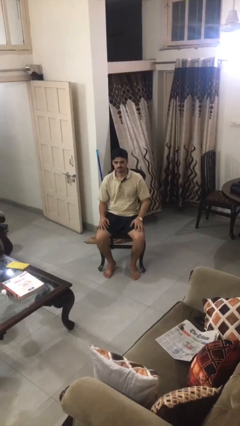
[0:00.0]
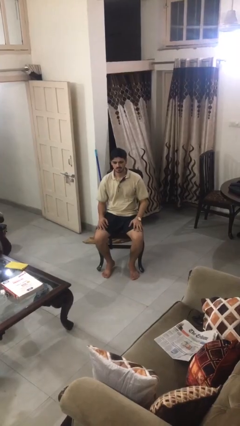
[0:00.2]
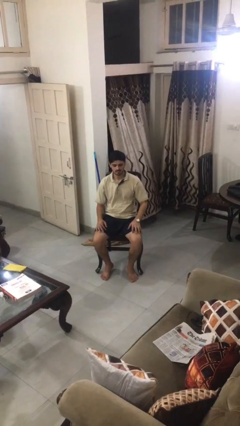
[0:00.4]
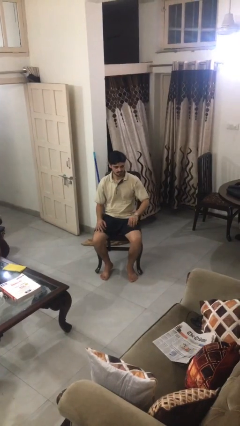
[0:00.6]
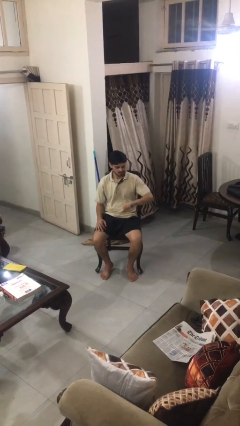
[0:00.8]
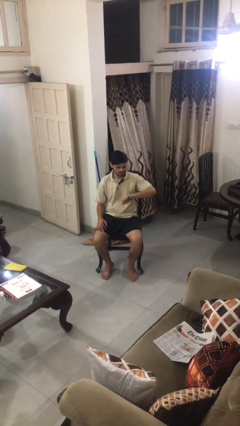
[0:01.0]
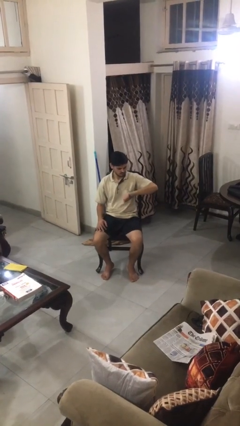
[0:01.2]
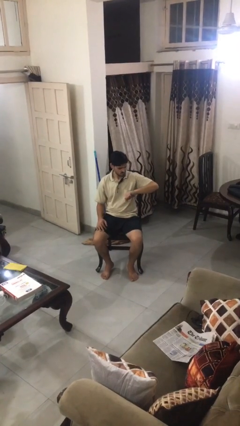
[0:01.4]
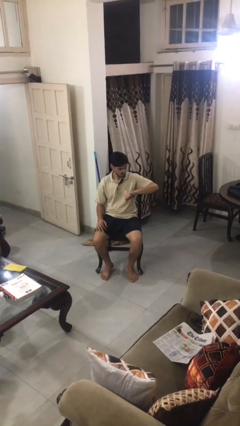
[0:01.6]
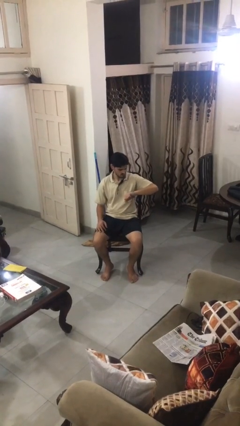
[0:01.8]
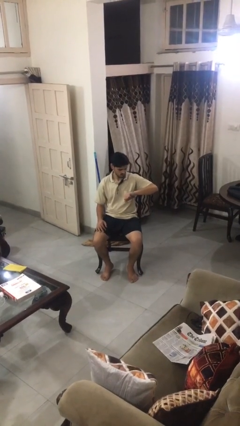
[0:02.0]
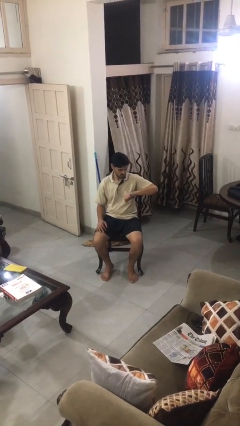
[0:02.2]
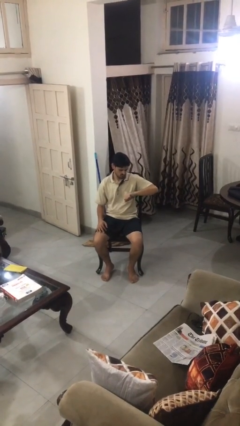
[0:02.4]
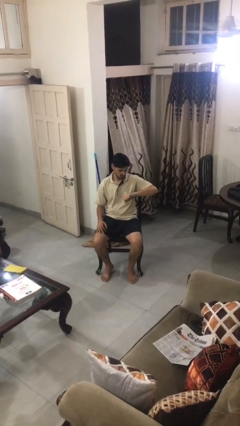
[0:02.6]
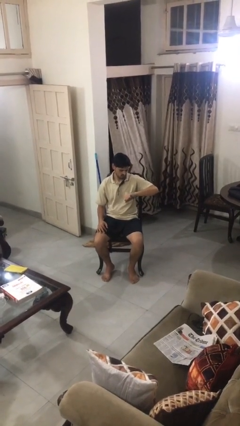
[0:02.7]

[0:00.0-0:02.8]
person looks at wristwatch

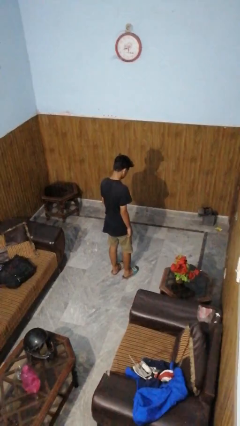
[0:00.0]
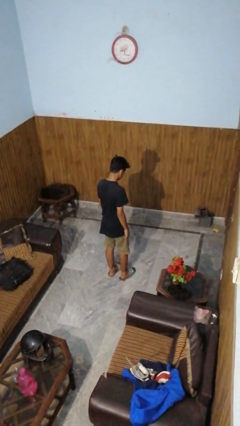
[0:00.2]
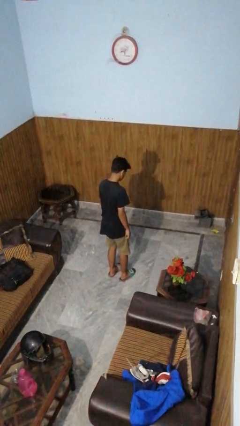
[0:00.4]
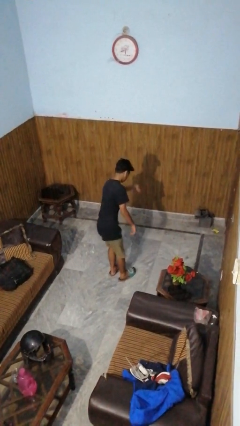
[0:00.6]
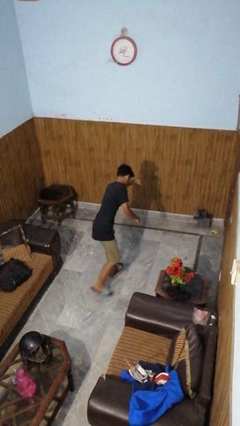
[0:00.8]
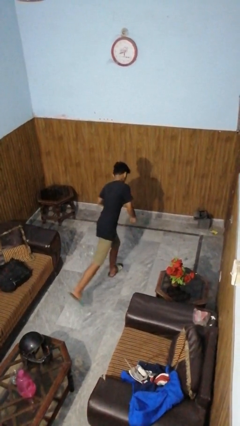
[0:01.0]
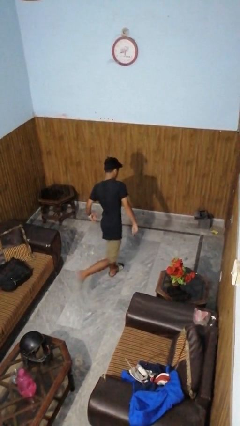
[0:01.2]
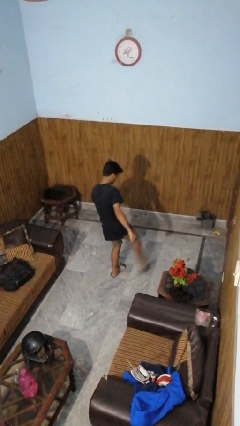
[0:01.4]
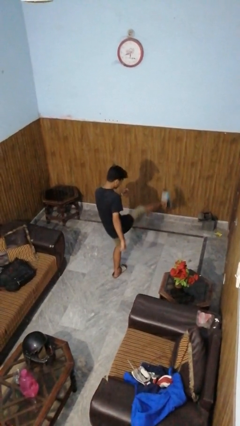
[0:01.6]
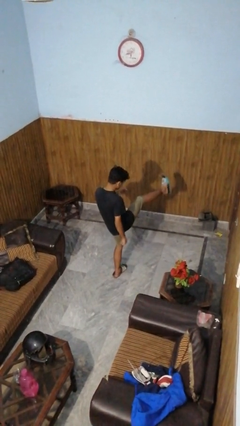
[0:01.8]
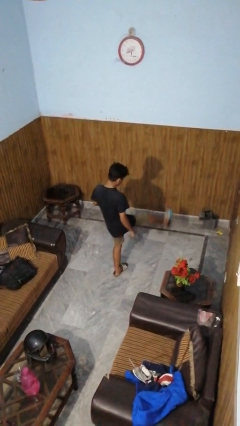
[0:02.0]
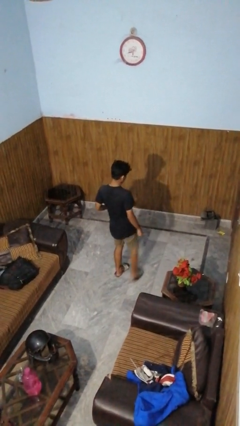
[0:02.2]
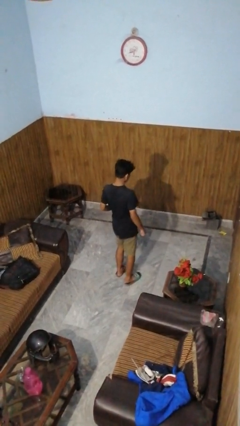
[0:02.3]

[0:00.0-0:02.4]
person karate kicks

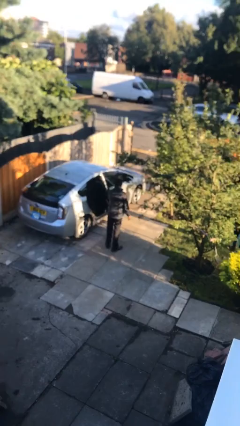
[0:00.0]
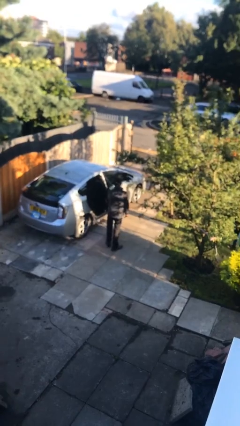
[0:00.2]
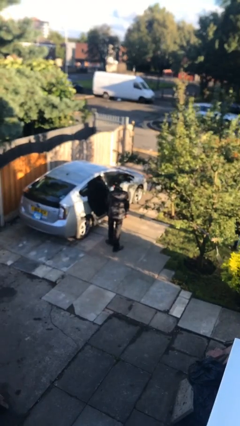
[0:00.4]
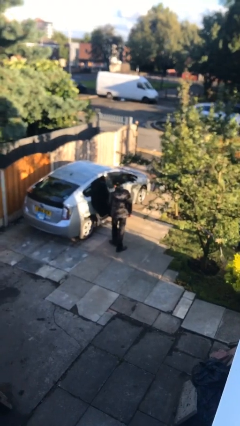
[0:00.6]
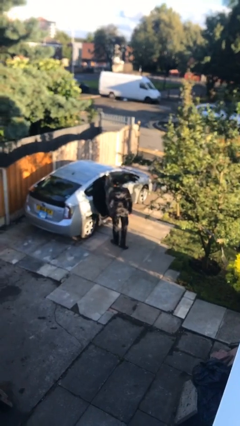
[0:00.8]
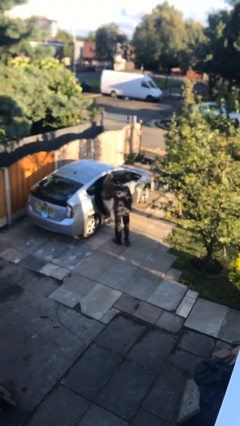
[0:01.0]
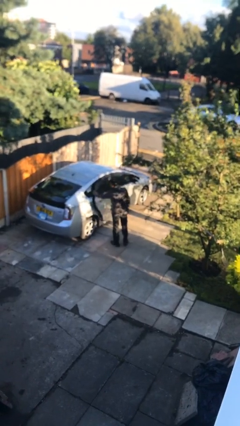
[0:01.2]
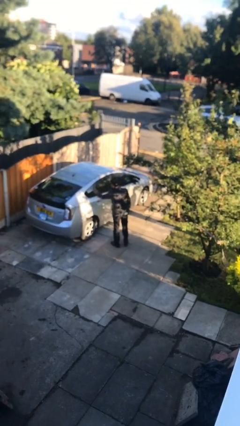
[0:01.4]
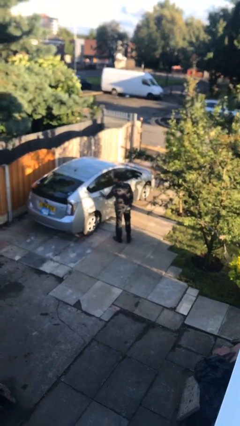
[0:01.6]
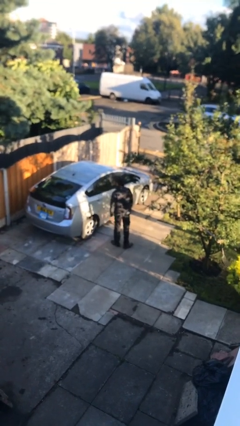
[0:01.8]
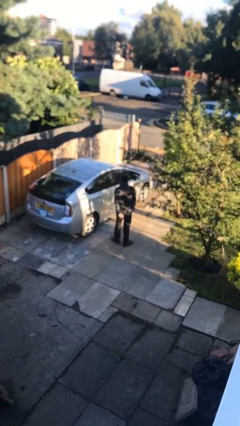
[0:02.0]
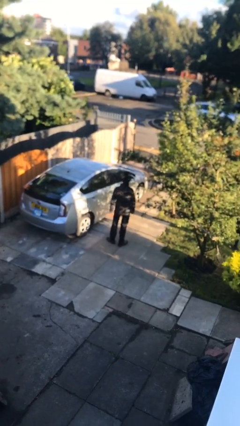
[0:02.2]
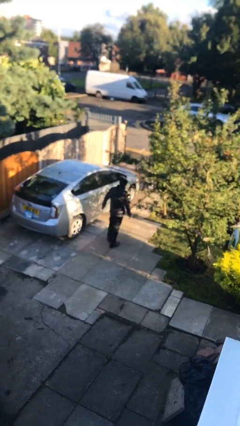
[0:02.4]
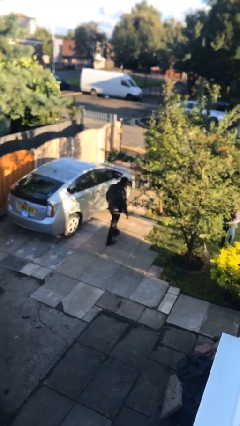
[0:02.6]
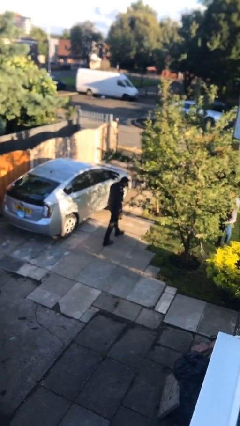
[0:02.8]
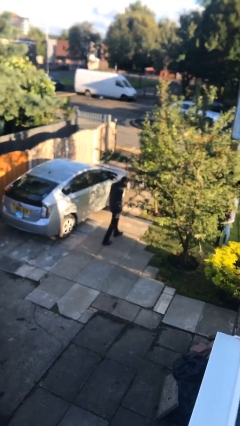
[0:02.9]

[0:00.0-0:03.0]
person closes car door

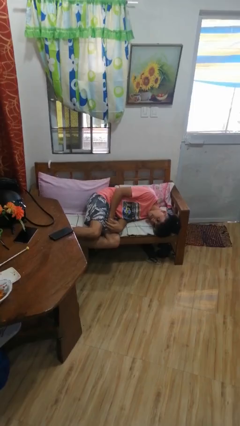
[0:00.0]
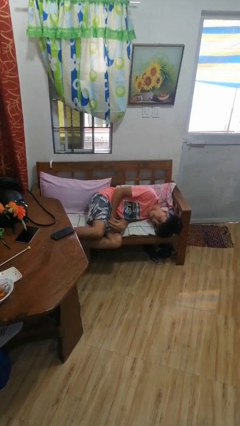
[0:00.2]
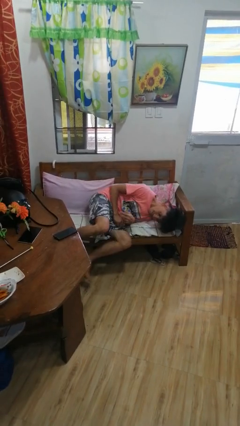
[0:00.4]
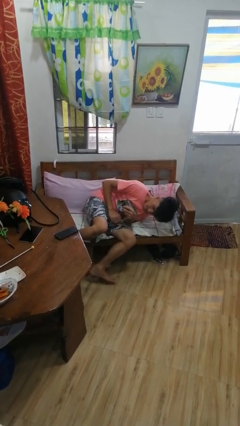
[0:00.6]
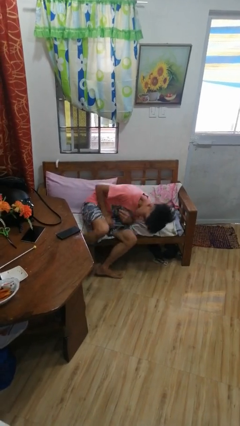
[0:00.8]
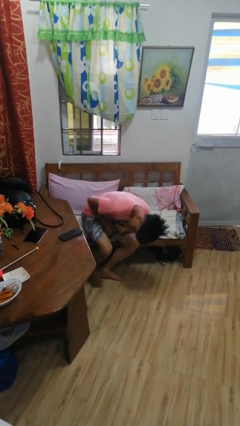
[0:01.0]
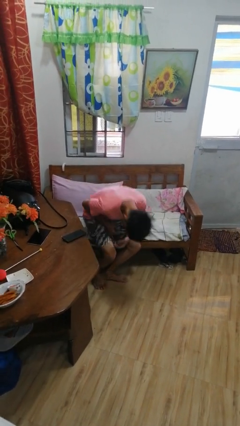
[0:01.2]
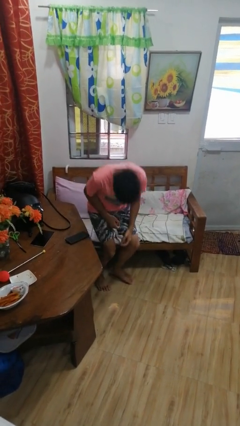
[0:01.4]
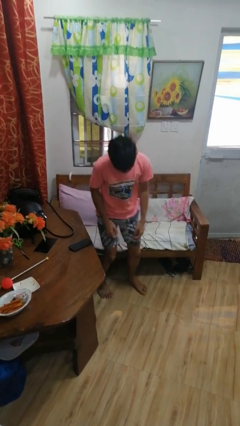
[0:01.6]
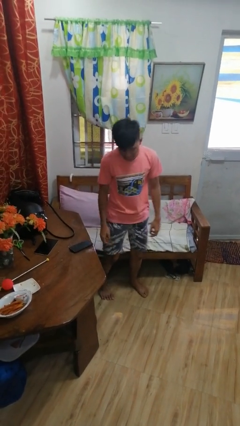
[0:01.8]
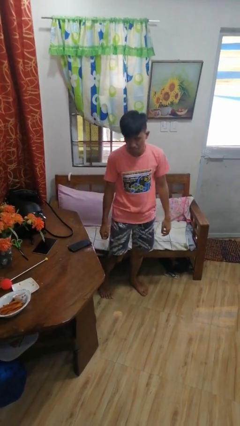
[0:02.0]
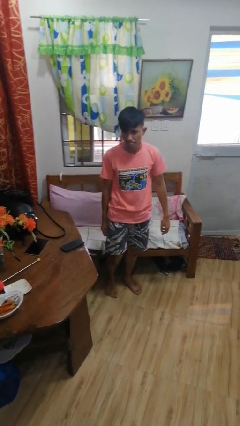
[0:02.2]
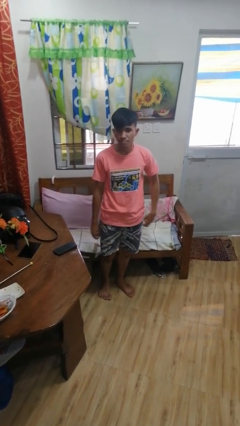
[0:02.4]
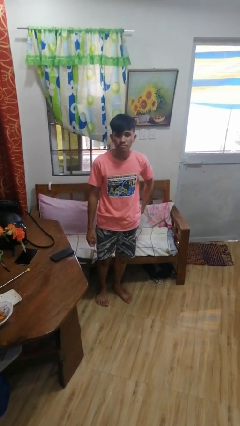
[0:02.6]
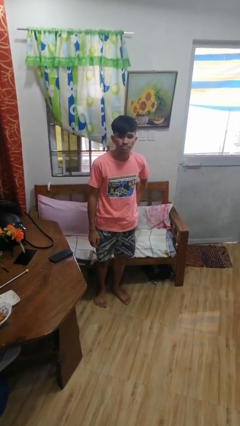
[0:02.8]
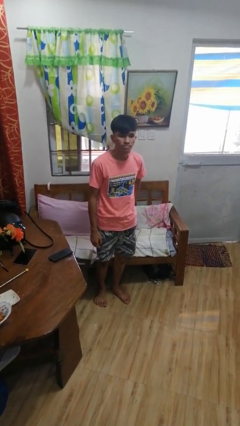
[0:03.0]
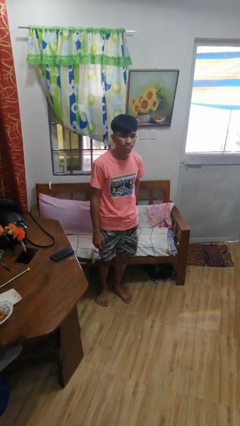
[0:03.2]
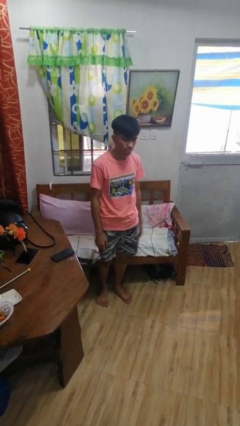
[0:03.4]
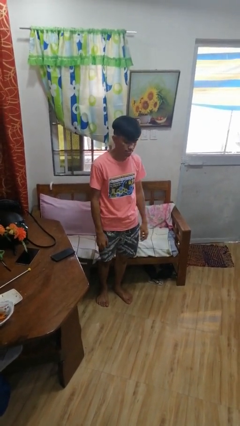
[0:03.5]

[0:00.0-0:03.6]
person stands up

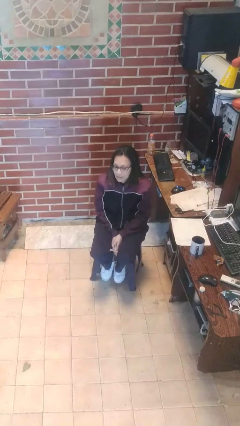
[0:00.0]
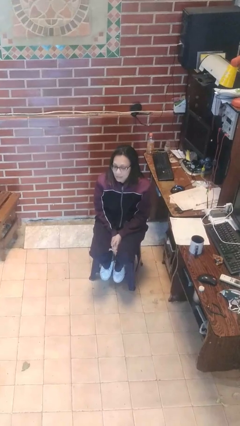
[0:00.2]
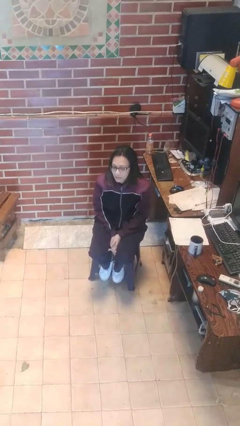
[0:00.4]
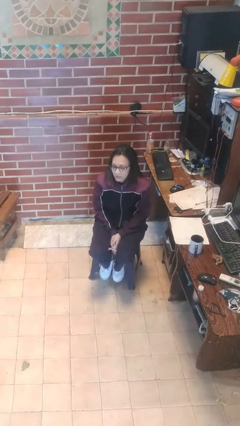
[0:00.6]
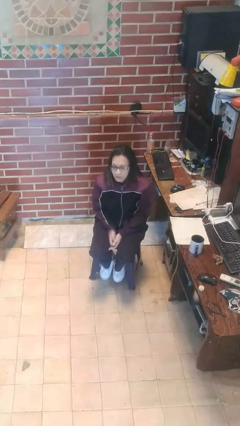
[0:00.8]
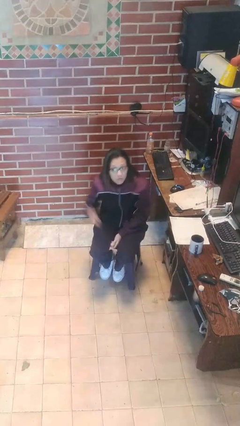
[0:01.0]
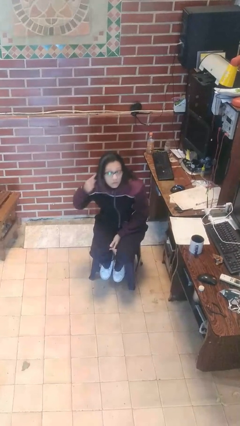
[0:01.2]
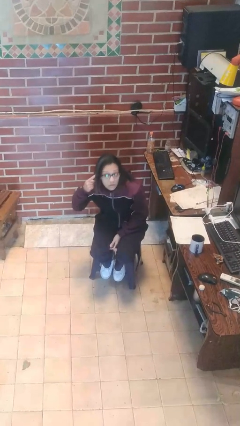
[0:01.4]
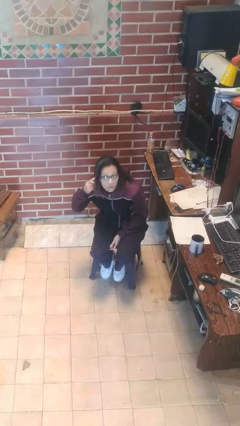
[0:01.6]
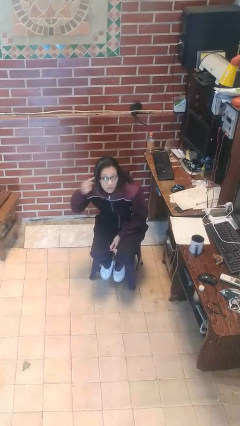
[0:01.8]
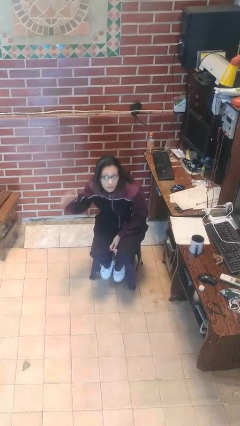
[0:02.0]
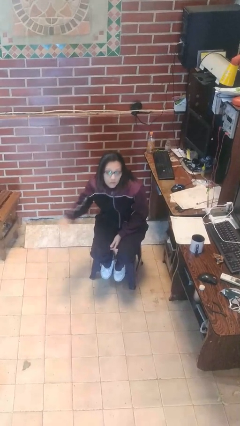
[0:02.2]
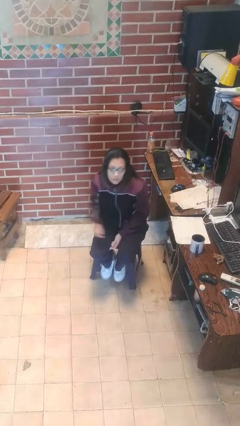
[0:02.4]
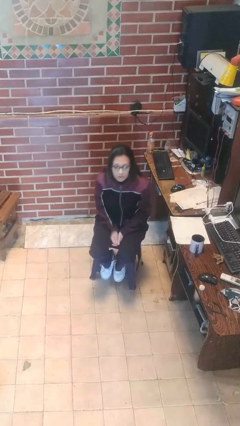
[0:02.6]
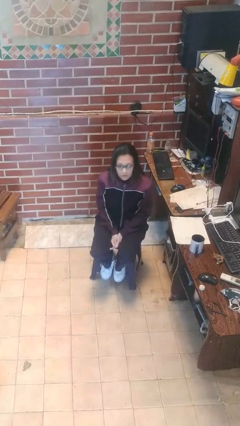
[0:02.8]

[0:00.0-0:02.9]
person gestures listen closely

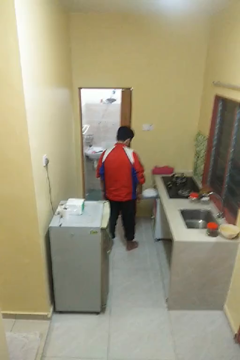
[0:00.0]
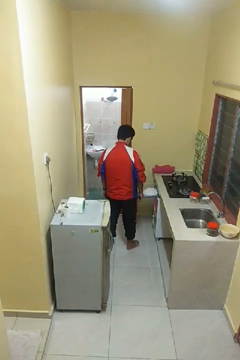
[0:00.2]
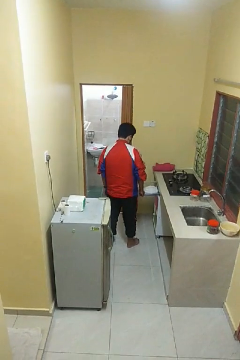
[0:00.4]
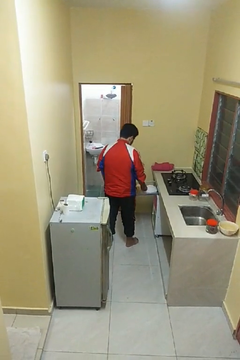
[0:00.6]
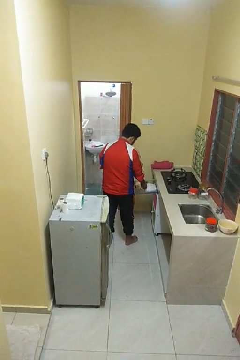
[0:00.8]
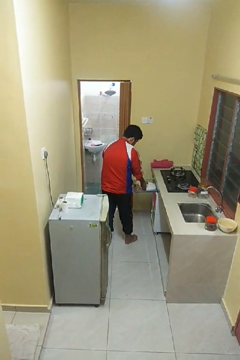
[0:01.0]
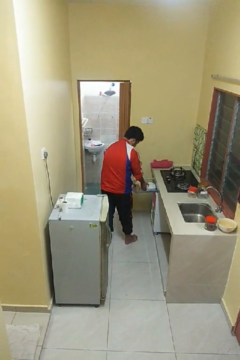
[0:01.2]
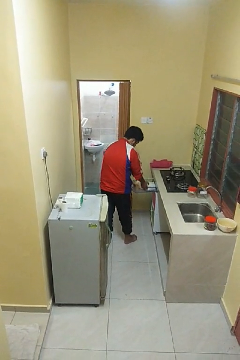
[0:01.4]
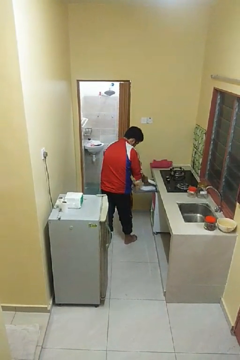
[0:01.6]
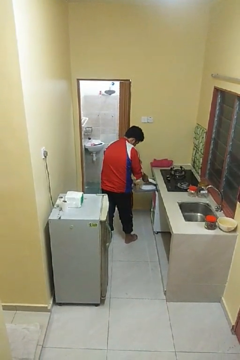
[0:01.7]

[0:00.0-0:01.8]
person searches in kitchen drawer

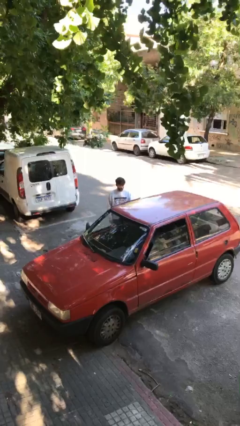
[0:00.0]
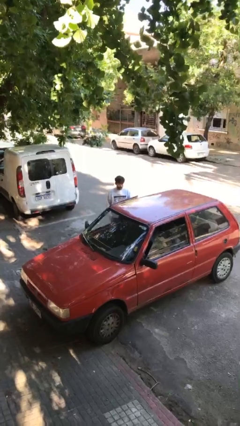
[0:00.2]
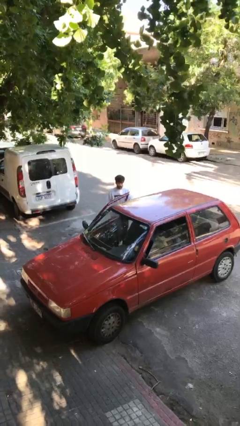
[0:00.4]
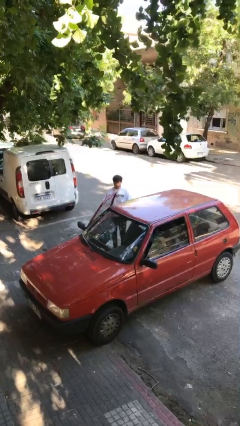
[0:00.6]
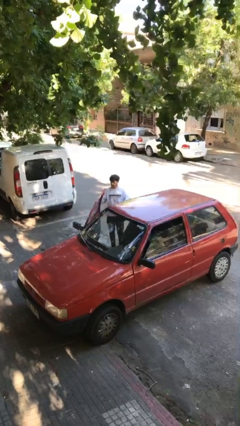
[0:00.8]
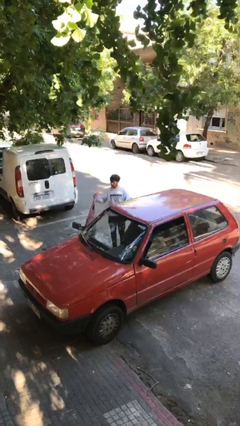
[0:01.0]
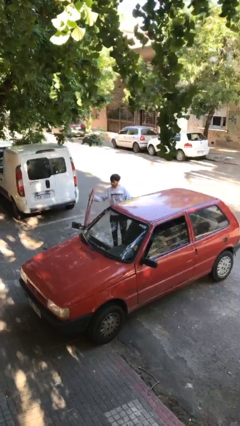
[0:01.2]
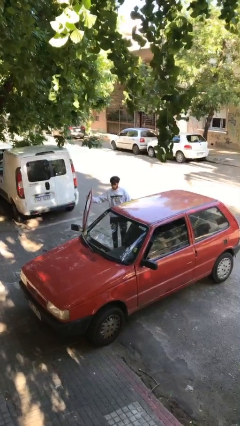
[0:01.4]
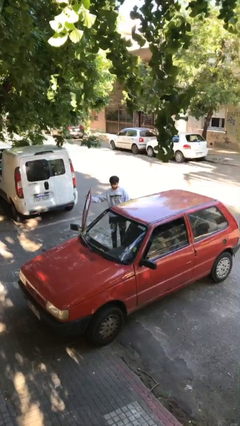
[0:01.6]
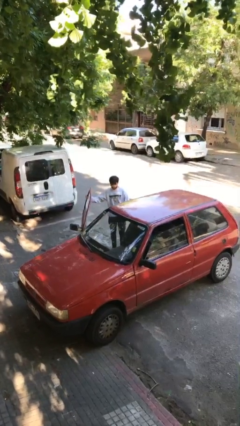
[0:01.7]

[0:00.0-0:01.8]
person opens car door
